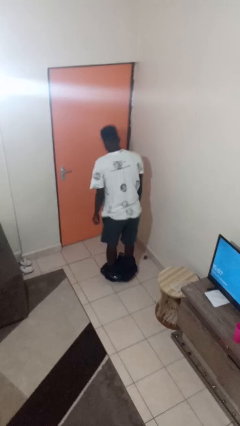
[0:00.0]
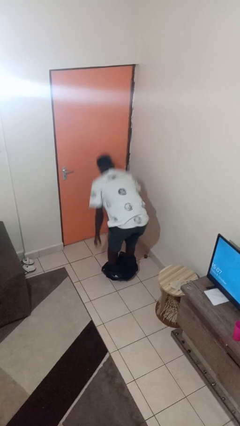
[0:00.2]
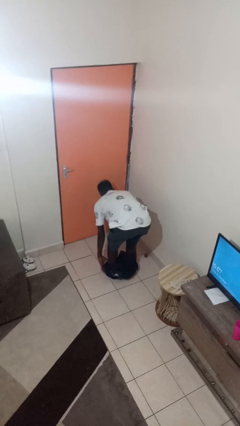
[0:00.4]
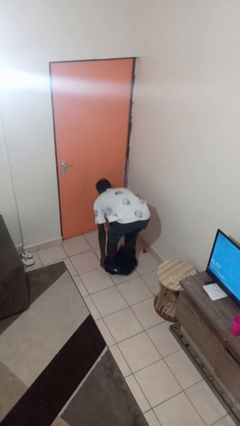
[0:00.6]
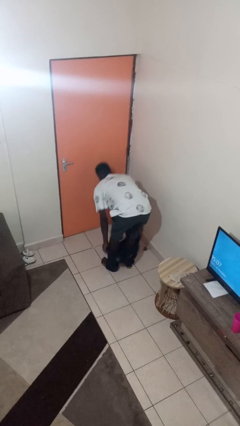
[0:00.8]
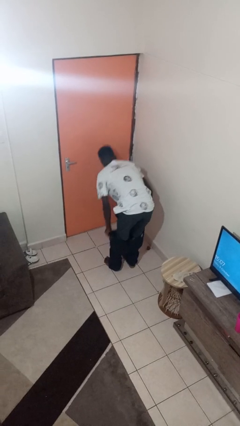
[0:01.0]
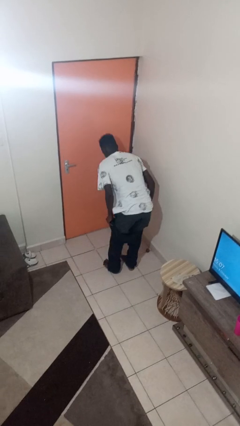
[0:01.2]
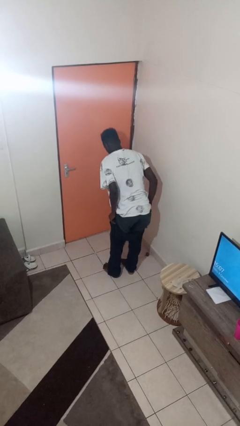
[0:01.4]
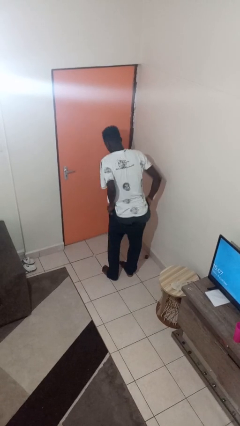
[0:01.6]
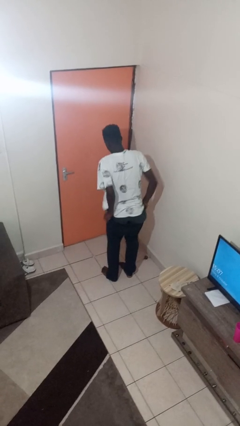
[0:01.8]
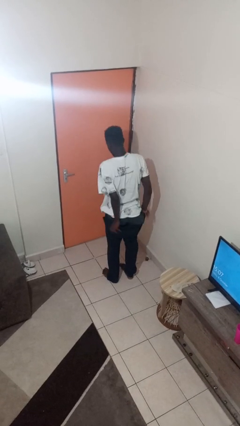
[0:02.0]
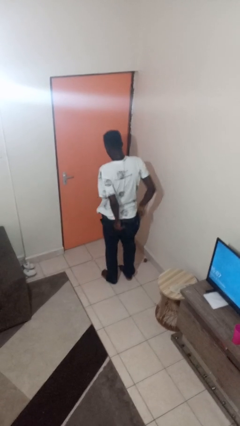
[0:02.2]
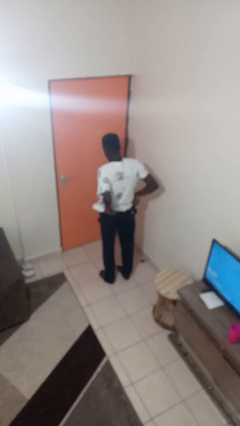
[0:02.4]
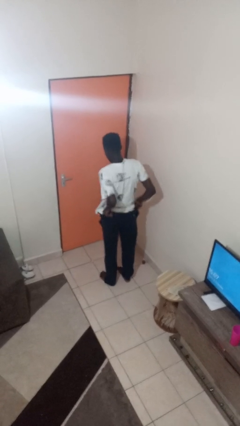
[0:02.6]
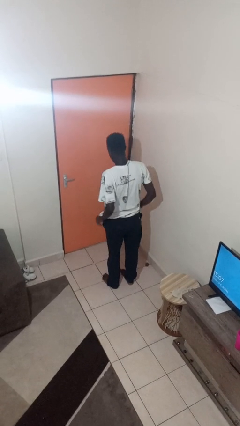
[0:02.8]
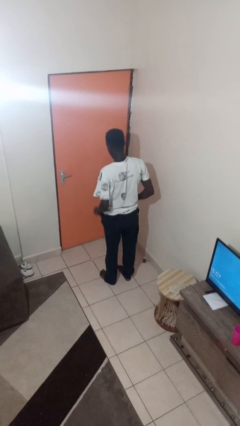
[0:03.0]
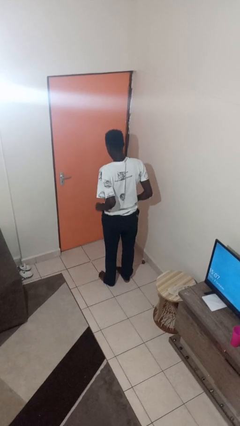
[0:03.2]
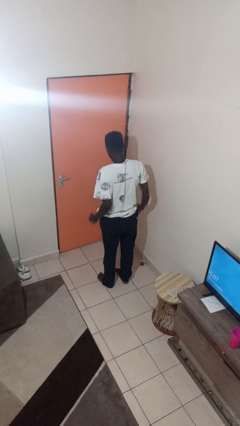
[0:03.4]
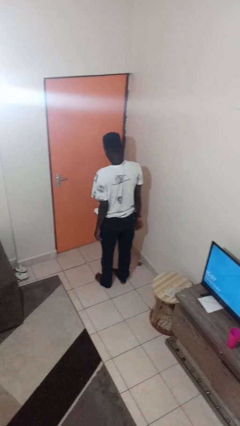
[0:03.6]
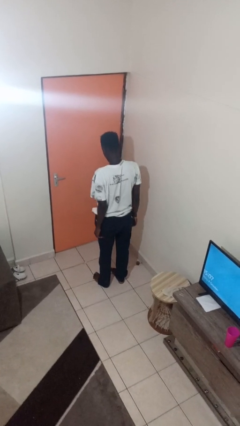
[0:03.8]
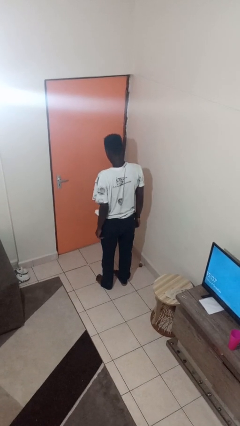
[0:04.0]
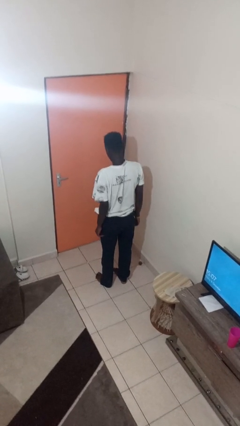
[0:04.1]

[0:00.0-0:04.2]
person puts on pants

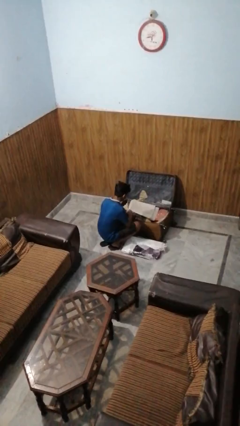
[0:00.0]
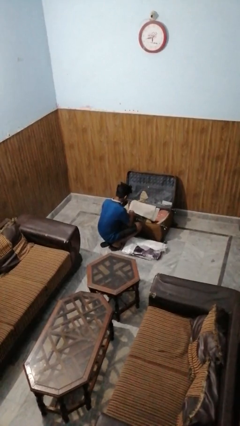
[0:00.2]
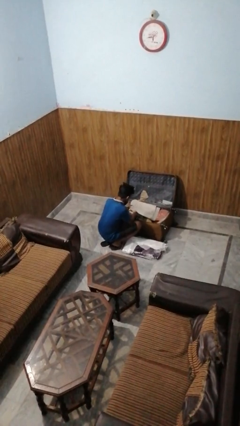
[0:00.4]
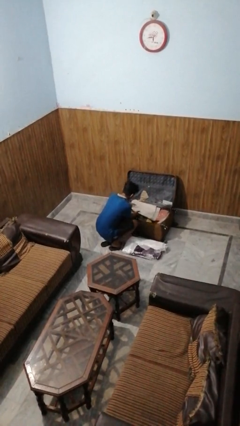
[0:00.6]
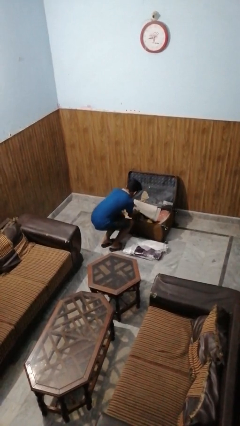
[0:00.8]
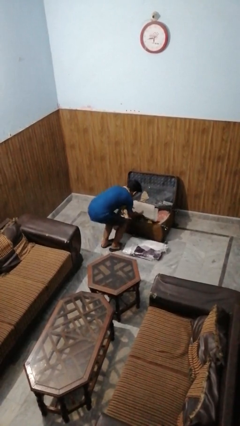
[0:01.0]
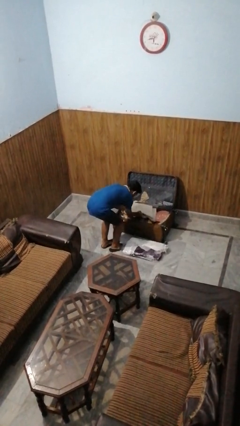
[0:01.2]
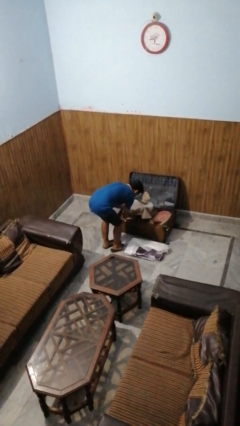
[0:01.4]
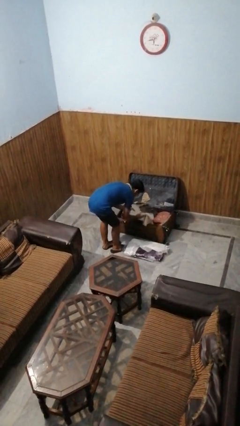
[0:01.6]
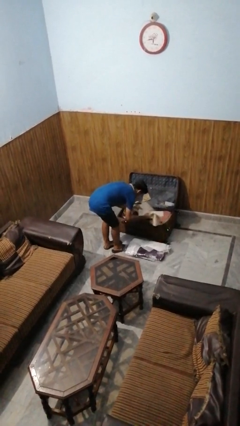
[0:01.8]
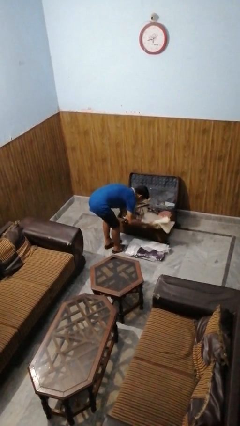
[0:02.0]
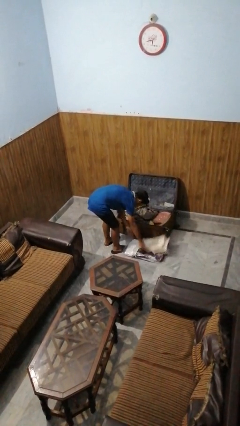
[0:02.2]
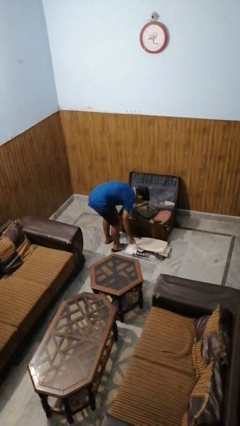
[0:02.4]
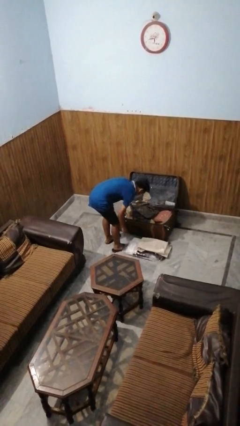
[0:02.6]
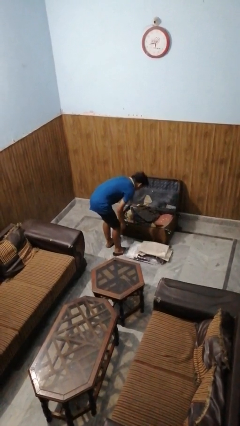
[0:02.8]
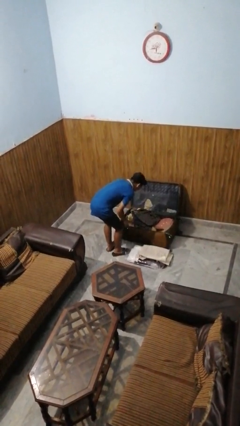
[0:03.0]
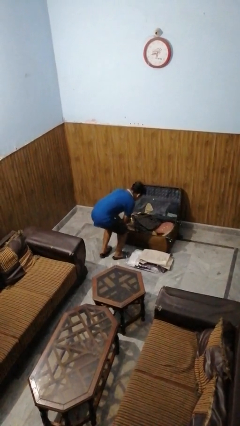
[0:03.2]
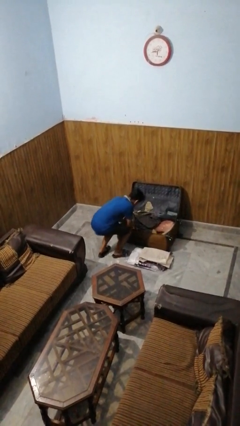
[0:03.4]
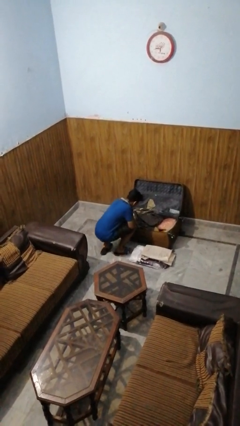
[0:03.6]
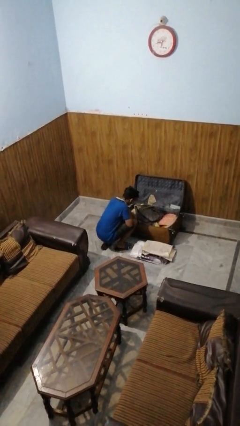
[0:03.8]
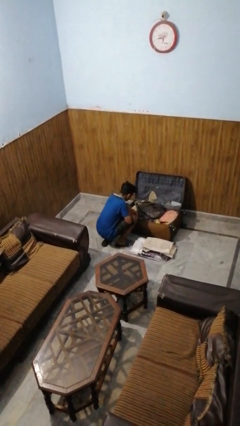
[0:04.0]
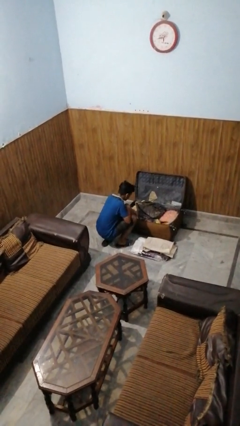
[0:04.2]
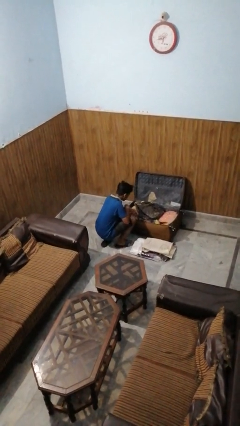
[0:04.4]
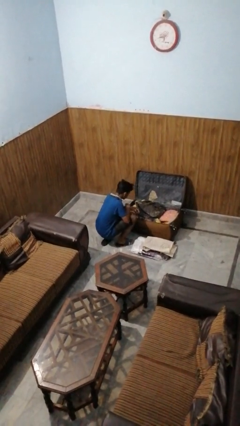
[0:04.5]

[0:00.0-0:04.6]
person unloads clothes from suitcase

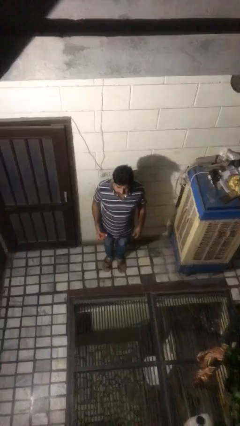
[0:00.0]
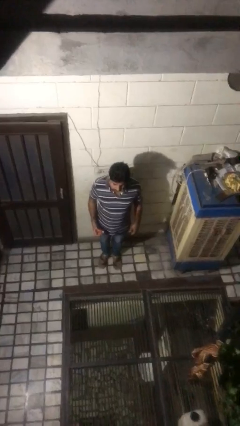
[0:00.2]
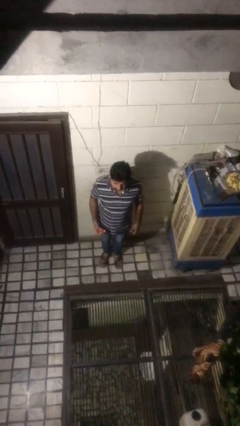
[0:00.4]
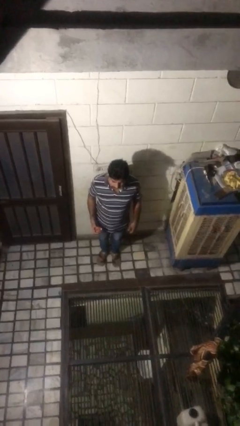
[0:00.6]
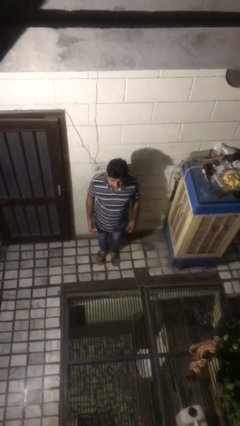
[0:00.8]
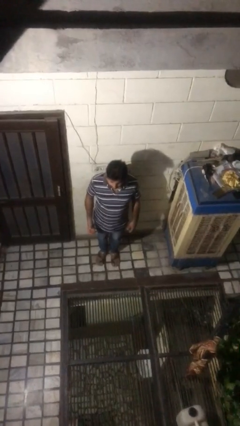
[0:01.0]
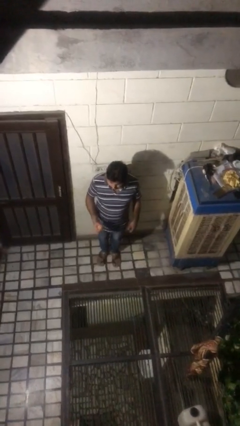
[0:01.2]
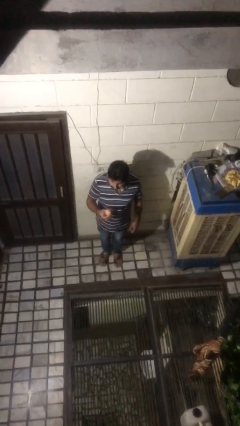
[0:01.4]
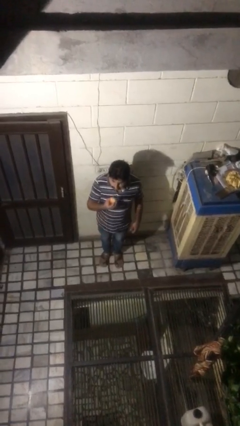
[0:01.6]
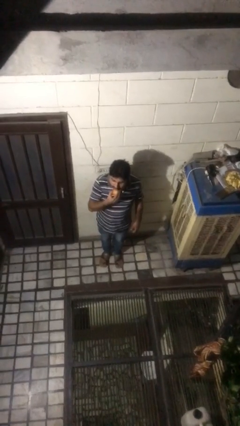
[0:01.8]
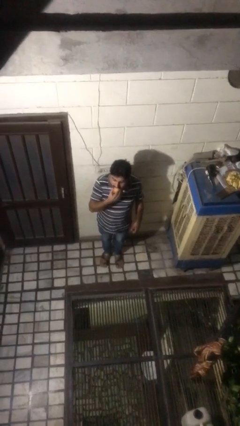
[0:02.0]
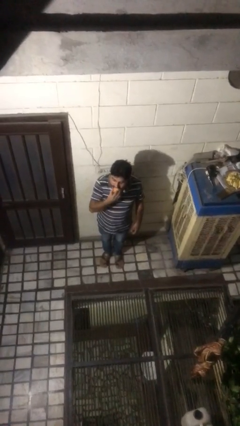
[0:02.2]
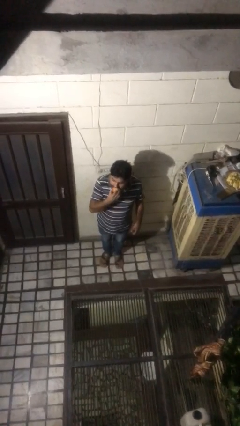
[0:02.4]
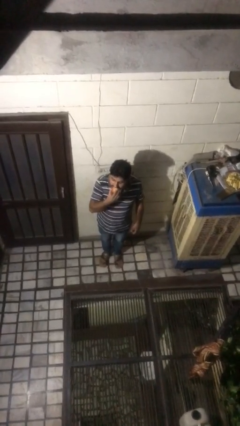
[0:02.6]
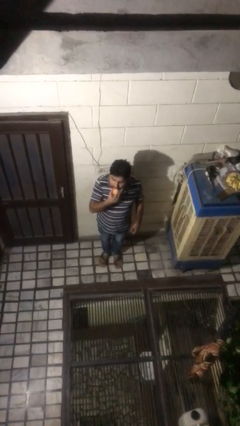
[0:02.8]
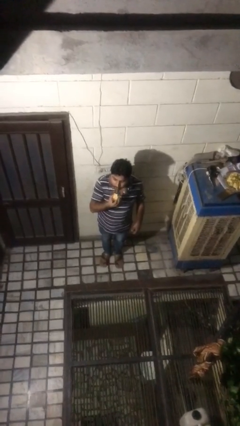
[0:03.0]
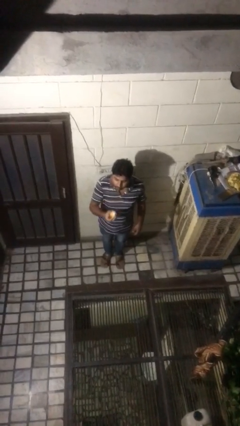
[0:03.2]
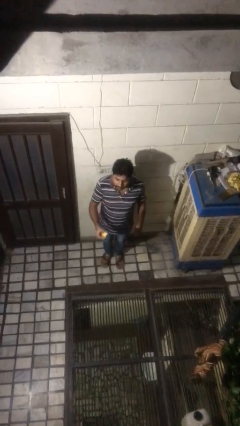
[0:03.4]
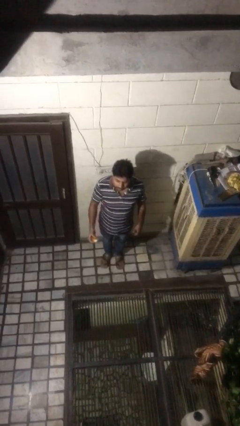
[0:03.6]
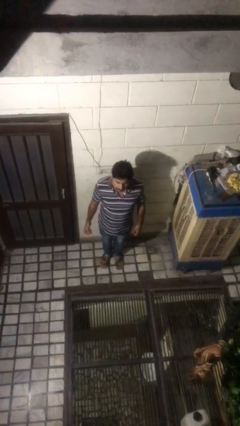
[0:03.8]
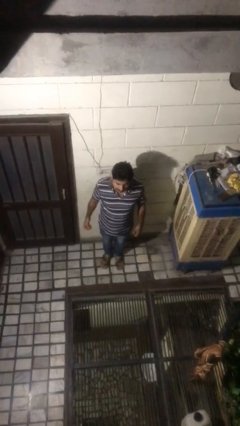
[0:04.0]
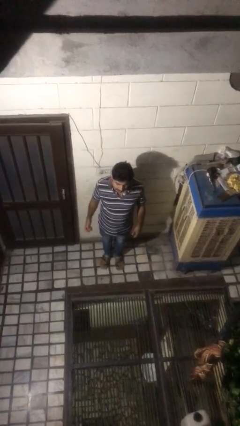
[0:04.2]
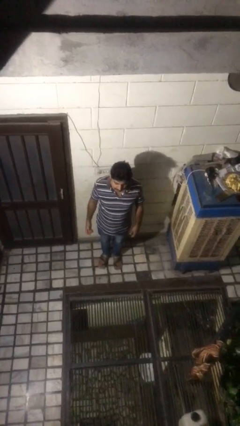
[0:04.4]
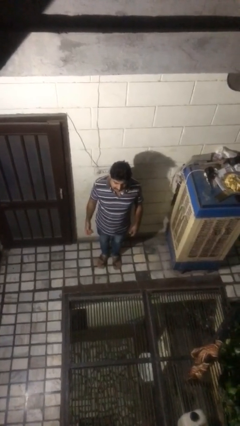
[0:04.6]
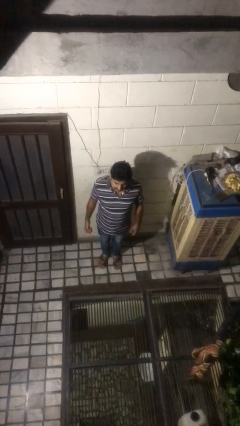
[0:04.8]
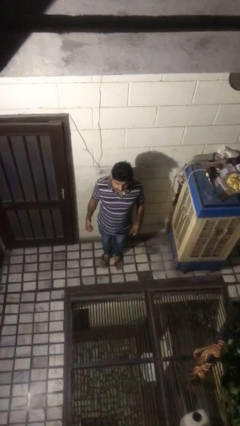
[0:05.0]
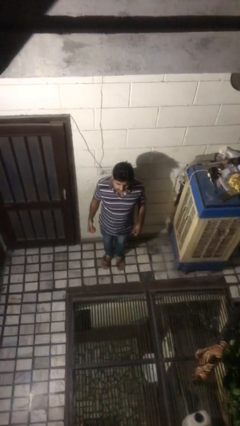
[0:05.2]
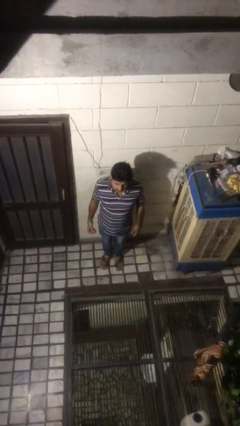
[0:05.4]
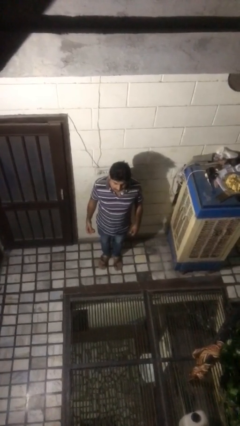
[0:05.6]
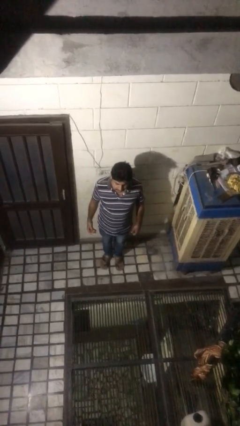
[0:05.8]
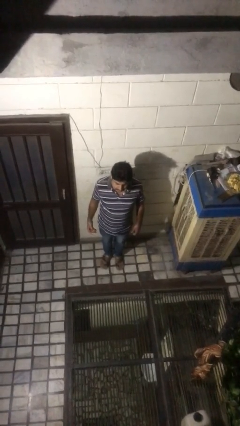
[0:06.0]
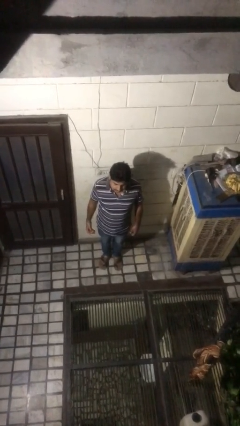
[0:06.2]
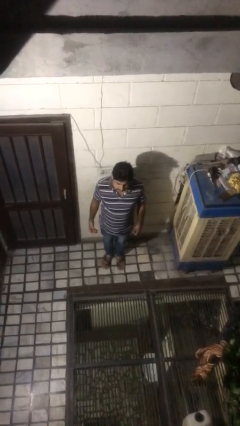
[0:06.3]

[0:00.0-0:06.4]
person eats apple

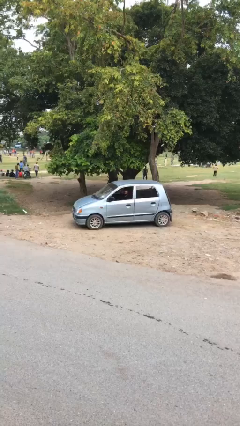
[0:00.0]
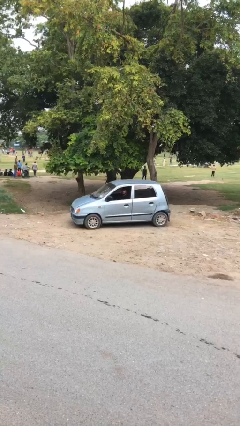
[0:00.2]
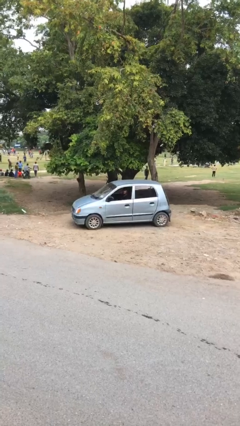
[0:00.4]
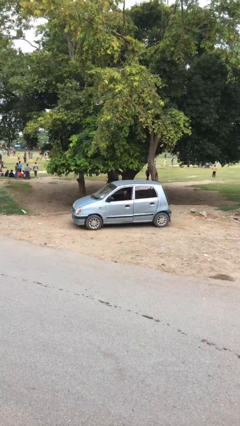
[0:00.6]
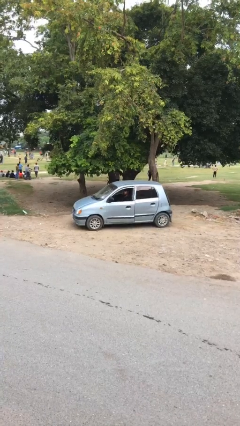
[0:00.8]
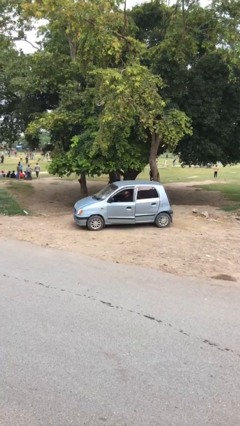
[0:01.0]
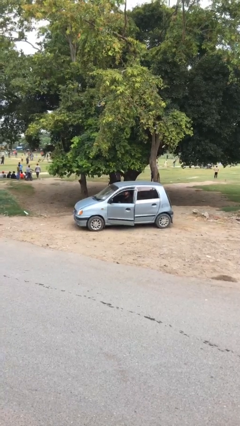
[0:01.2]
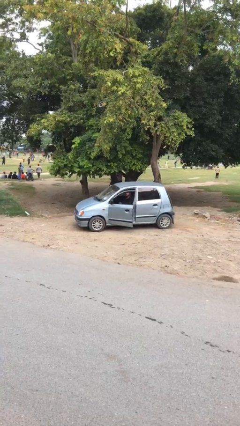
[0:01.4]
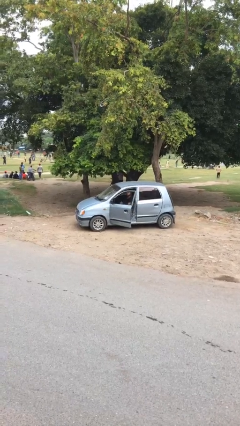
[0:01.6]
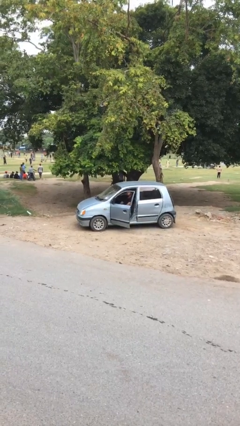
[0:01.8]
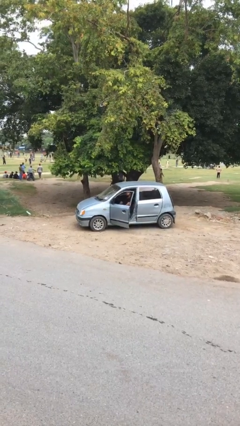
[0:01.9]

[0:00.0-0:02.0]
person opens car door

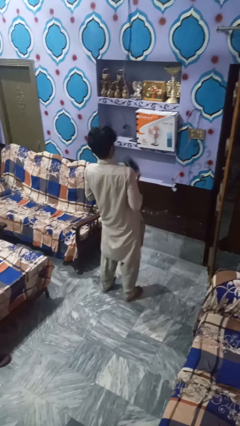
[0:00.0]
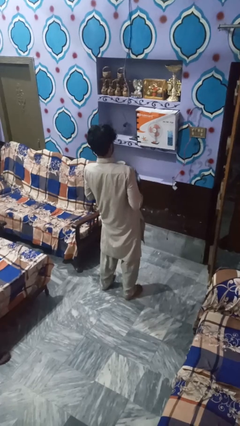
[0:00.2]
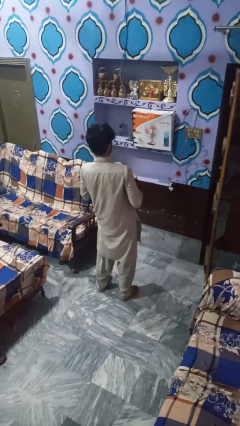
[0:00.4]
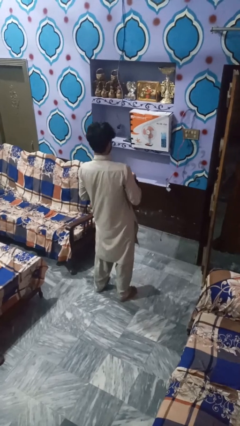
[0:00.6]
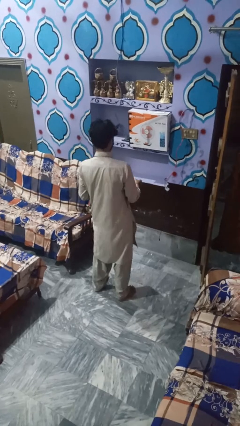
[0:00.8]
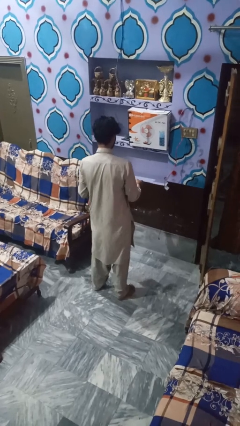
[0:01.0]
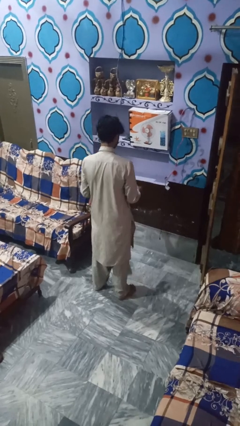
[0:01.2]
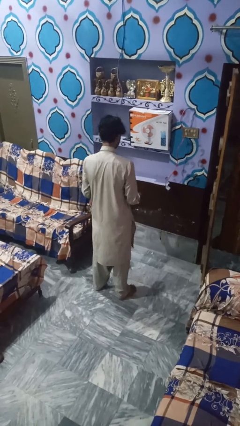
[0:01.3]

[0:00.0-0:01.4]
person catches dropped object
